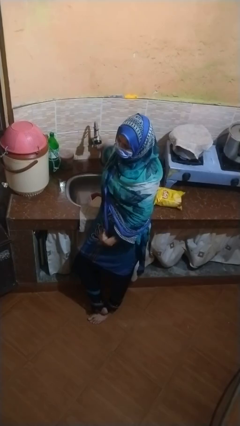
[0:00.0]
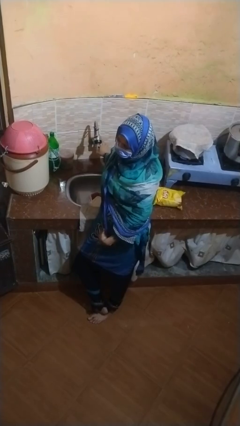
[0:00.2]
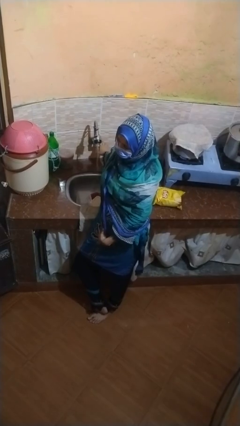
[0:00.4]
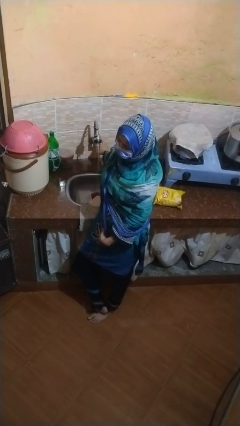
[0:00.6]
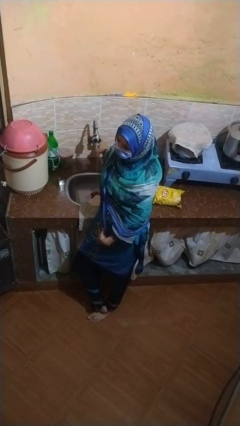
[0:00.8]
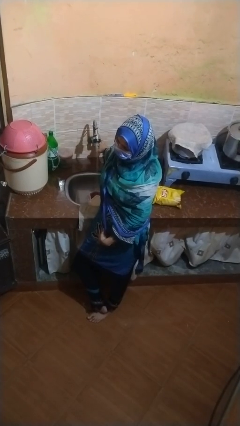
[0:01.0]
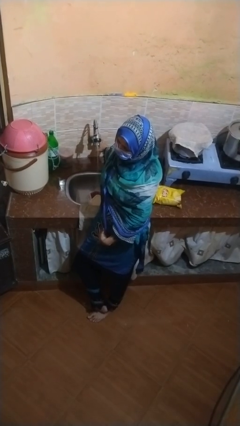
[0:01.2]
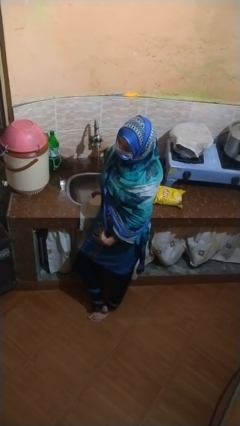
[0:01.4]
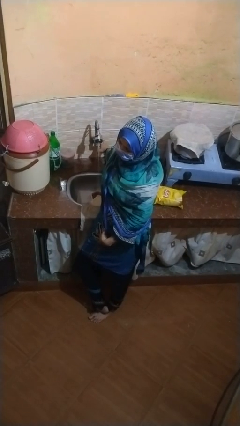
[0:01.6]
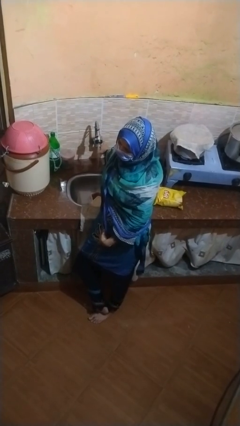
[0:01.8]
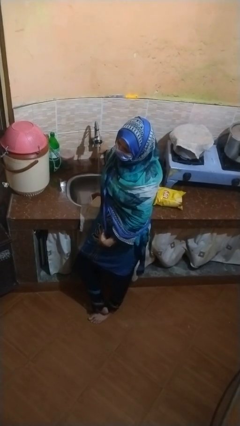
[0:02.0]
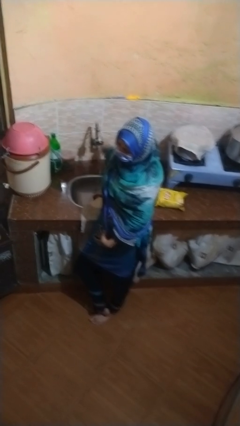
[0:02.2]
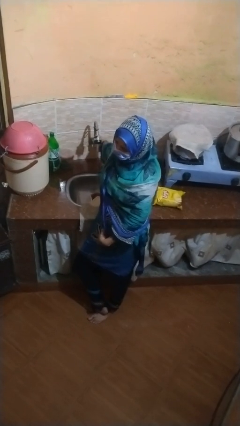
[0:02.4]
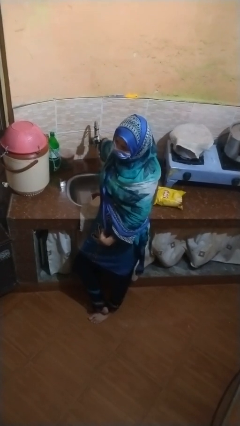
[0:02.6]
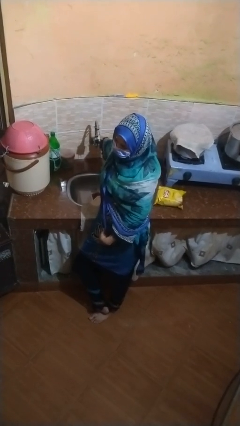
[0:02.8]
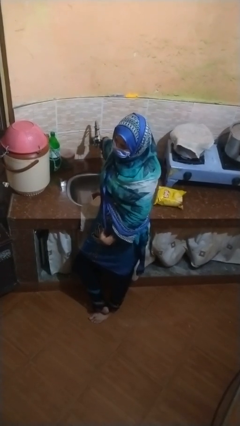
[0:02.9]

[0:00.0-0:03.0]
person turns on faucet

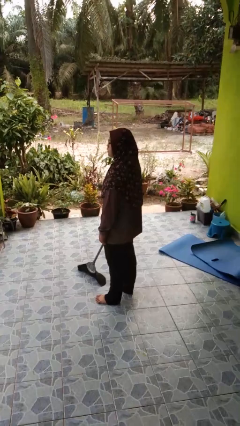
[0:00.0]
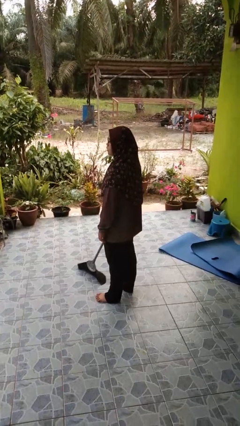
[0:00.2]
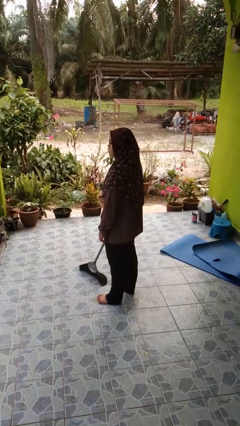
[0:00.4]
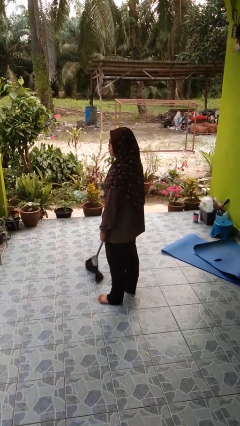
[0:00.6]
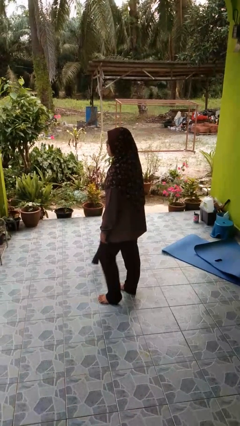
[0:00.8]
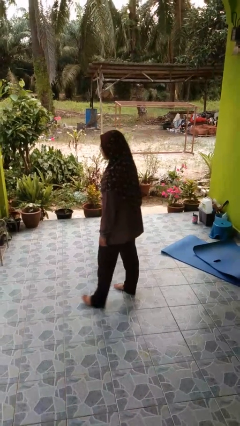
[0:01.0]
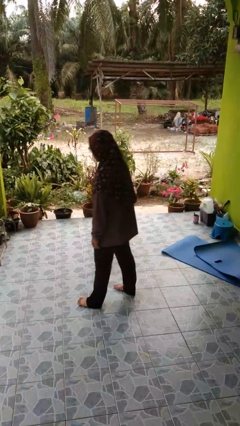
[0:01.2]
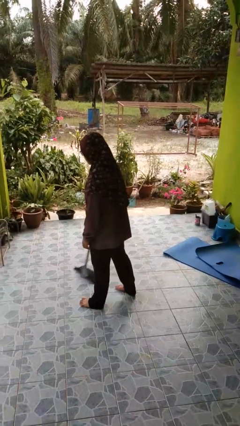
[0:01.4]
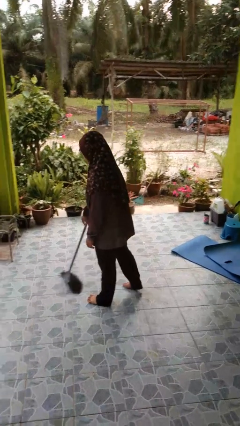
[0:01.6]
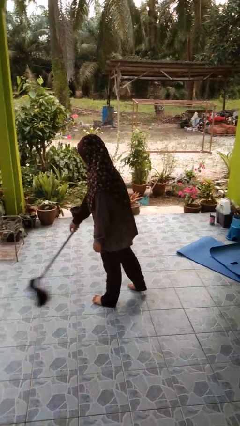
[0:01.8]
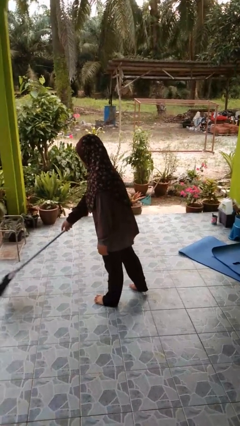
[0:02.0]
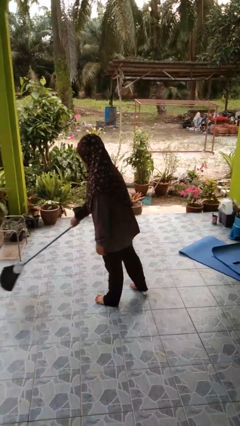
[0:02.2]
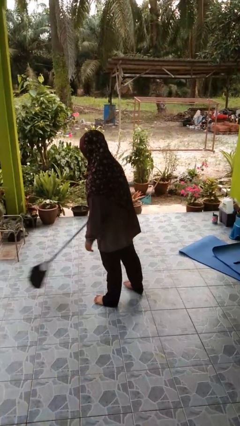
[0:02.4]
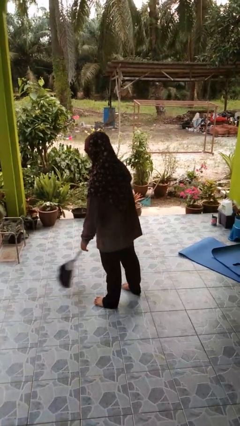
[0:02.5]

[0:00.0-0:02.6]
person sweeps floor

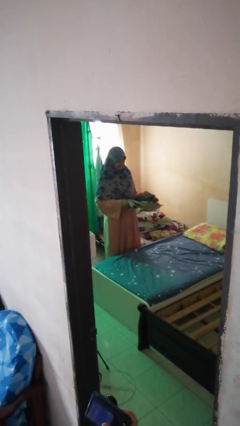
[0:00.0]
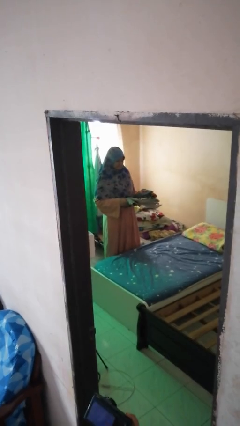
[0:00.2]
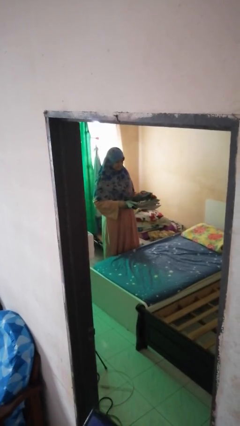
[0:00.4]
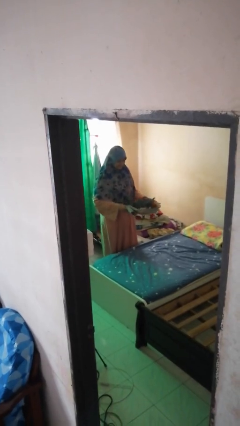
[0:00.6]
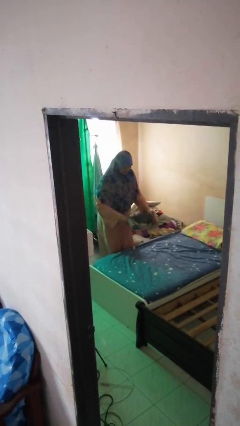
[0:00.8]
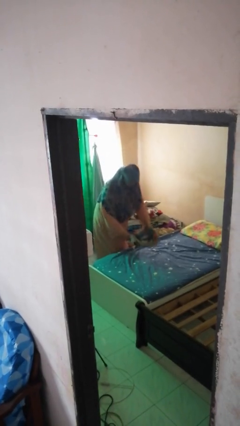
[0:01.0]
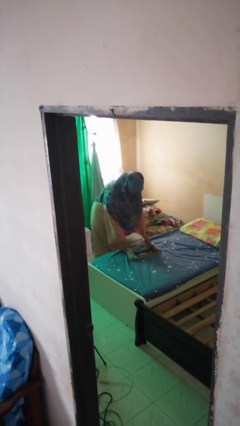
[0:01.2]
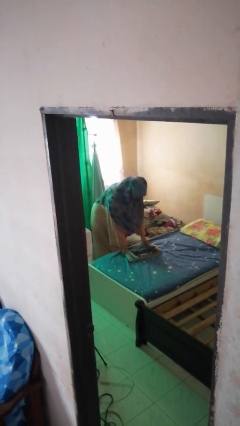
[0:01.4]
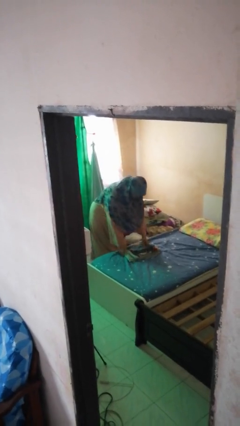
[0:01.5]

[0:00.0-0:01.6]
person puts down object on bed

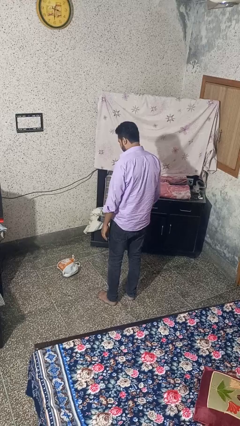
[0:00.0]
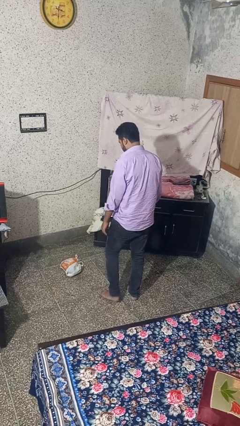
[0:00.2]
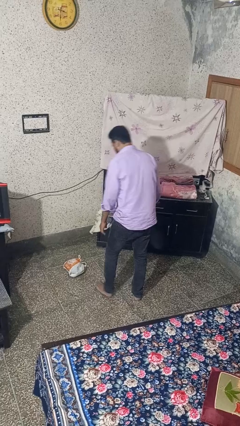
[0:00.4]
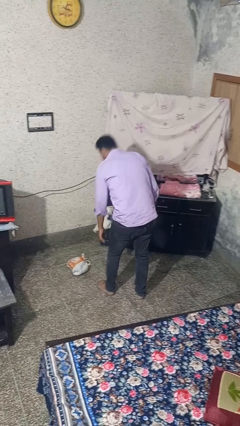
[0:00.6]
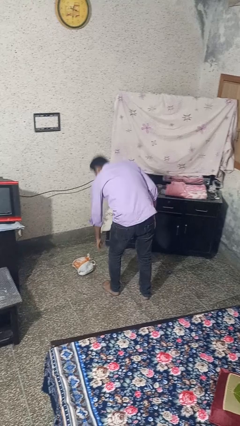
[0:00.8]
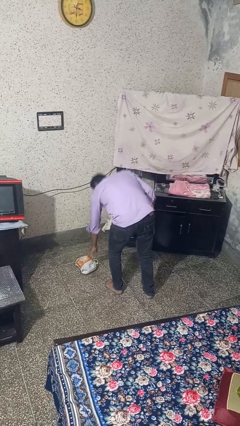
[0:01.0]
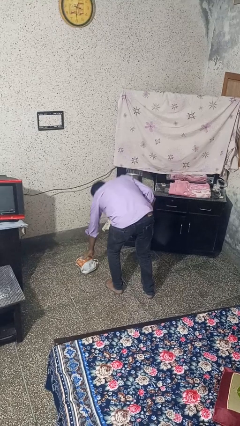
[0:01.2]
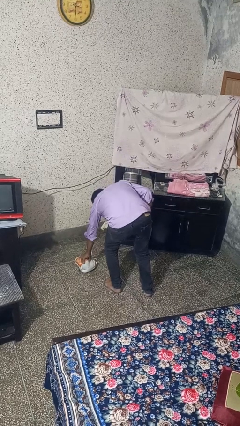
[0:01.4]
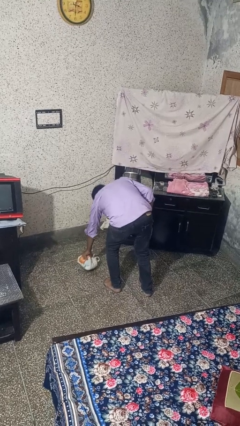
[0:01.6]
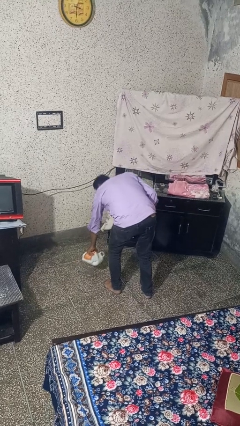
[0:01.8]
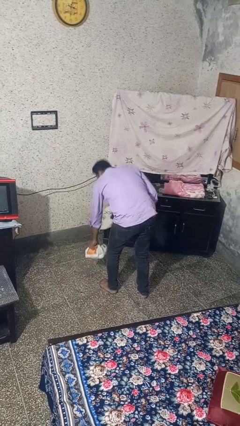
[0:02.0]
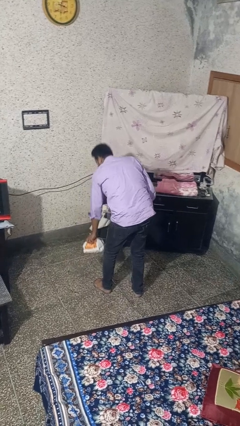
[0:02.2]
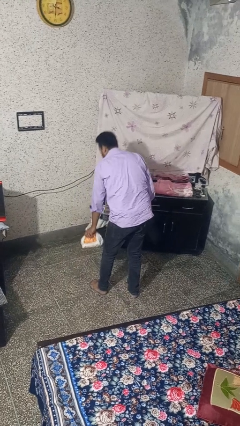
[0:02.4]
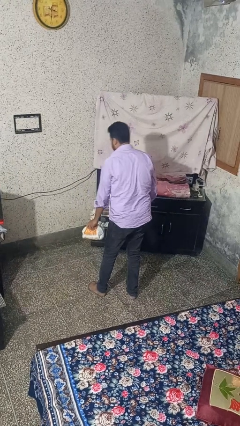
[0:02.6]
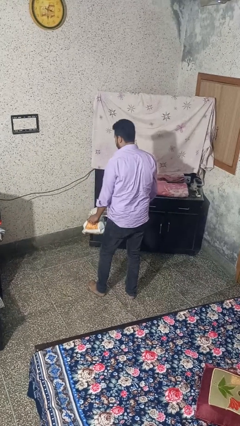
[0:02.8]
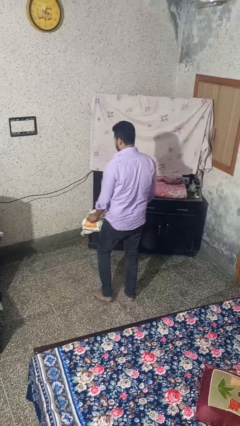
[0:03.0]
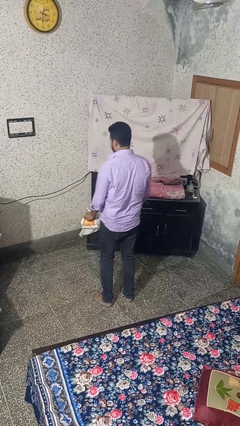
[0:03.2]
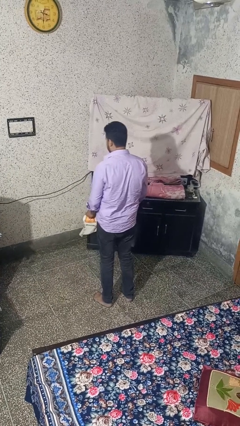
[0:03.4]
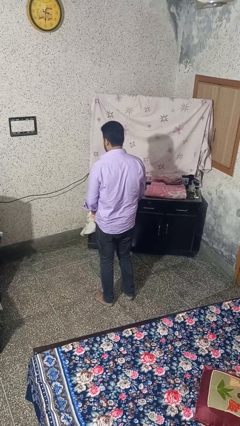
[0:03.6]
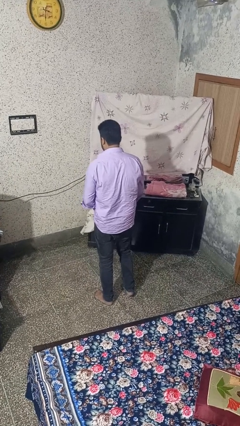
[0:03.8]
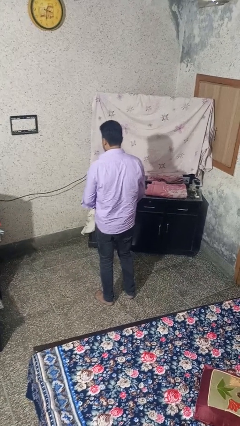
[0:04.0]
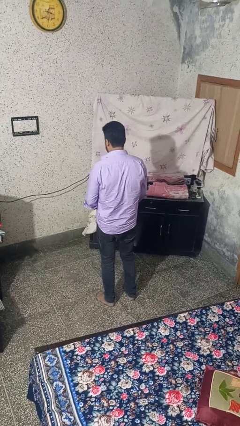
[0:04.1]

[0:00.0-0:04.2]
person picks up object from floor

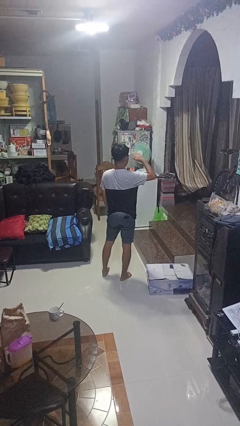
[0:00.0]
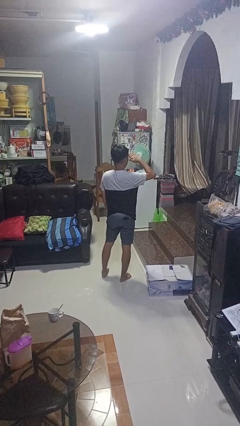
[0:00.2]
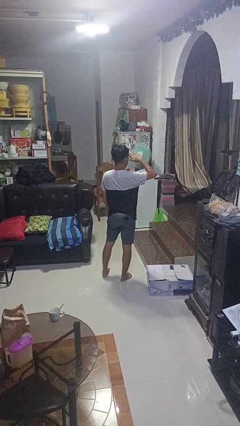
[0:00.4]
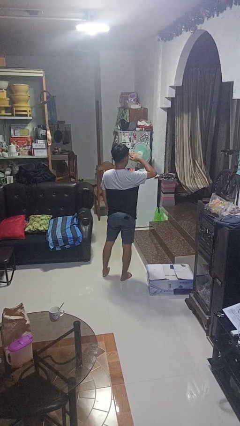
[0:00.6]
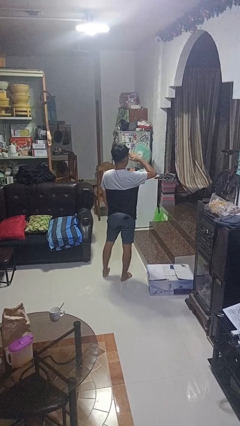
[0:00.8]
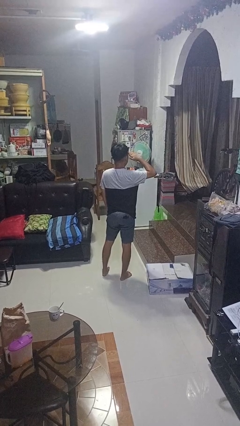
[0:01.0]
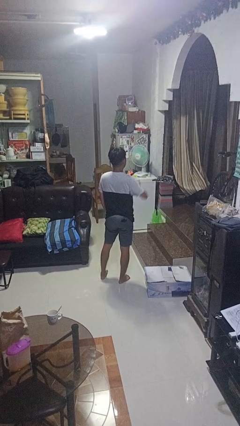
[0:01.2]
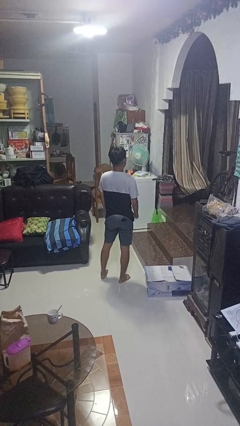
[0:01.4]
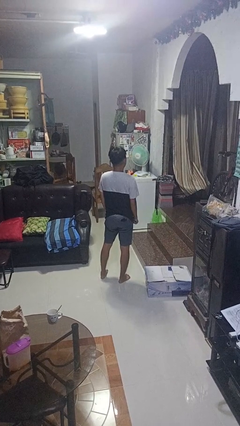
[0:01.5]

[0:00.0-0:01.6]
person salutes

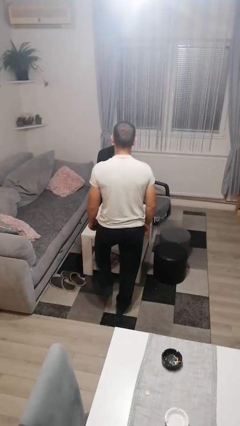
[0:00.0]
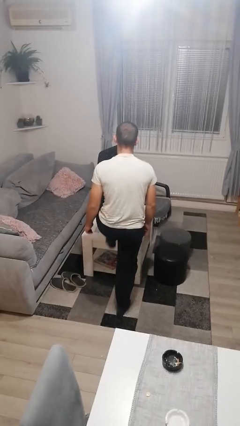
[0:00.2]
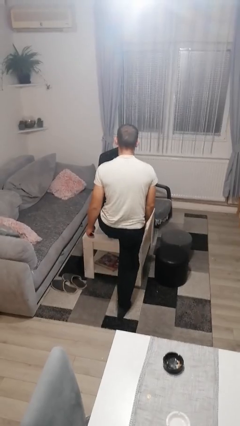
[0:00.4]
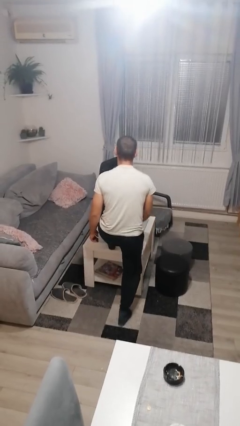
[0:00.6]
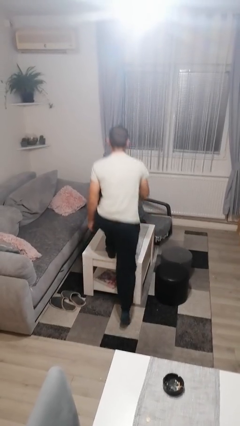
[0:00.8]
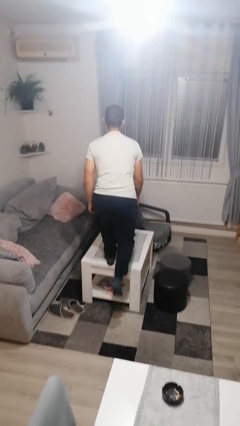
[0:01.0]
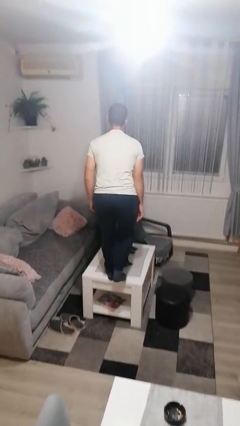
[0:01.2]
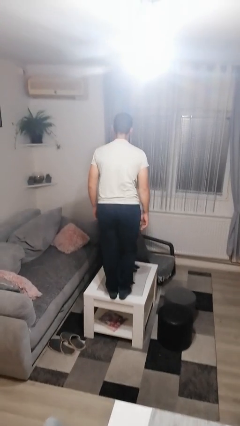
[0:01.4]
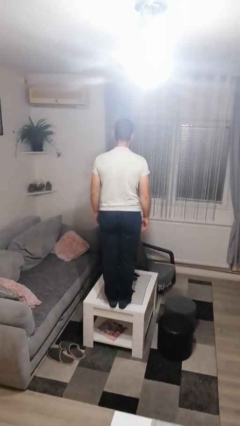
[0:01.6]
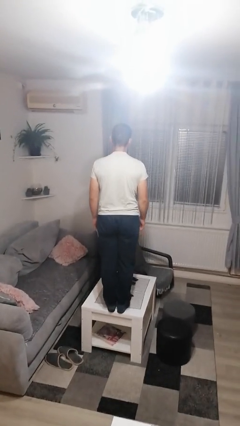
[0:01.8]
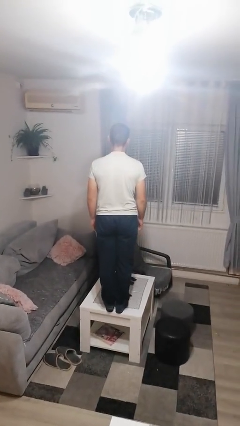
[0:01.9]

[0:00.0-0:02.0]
person climbs on table

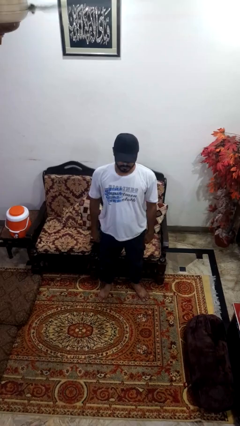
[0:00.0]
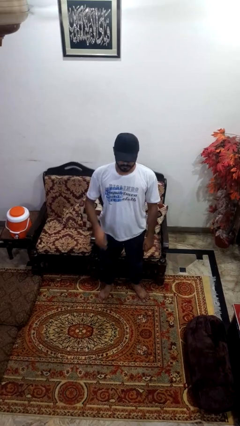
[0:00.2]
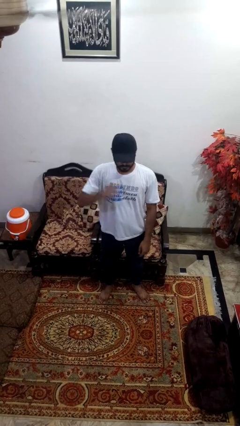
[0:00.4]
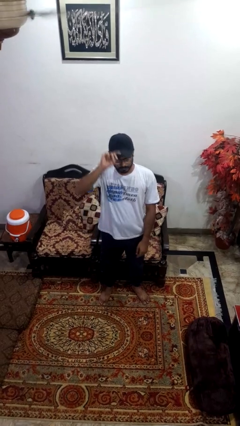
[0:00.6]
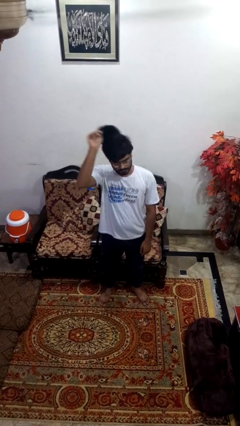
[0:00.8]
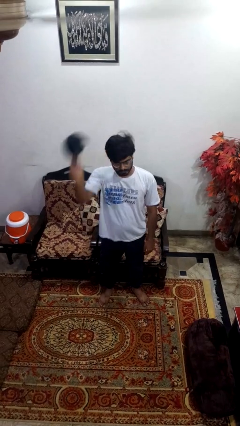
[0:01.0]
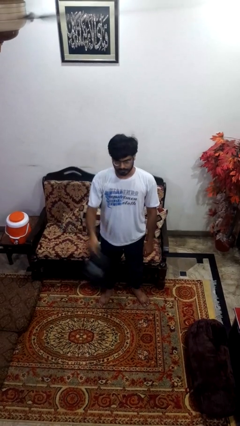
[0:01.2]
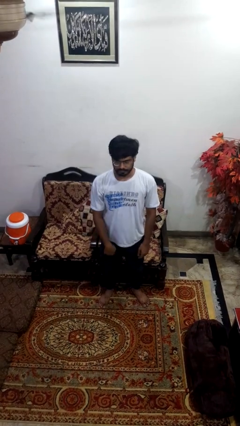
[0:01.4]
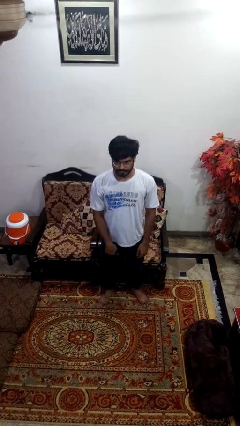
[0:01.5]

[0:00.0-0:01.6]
person takes off hat

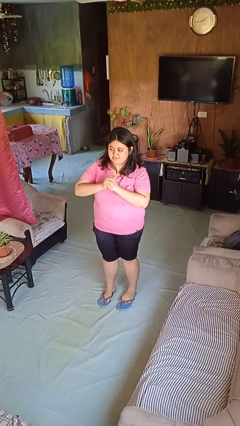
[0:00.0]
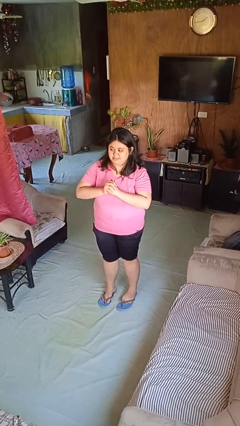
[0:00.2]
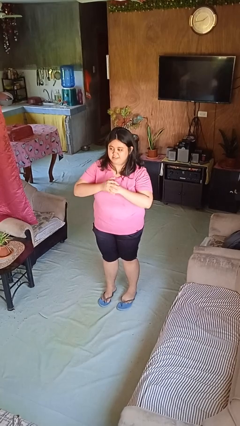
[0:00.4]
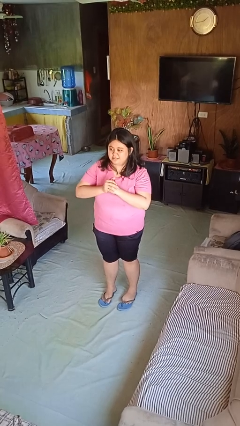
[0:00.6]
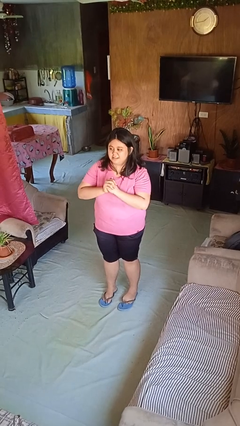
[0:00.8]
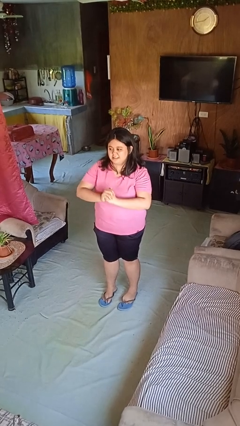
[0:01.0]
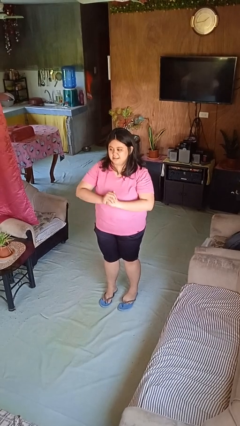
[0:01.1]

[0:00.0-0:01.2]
person cracks knuckles
